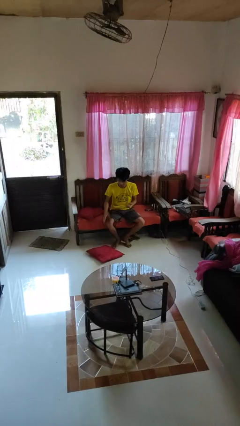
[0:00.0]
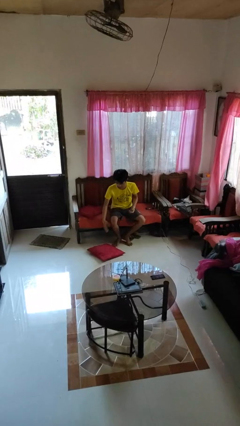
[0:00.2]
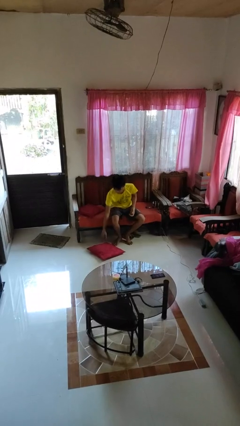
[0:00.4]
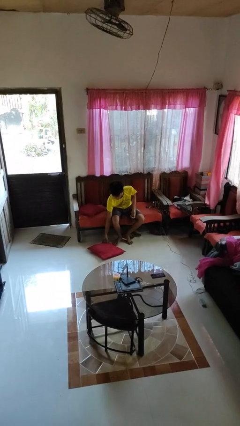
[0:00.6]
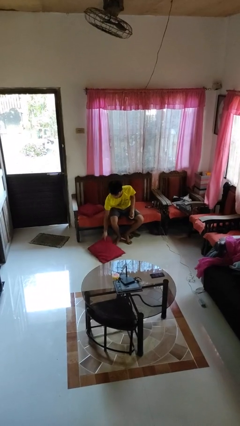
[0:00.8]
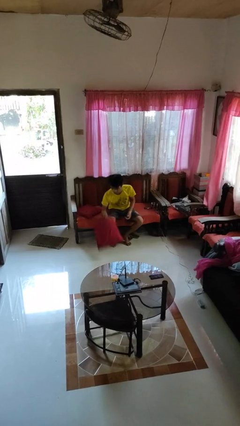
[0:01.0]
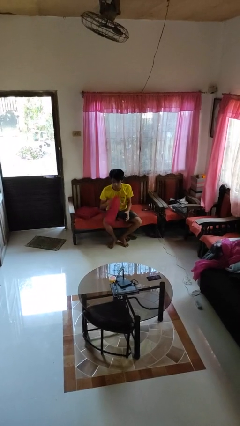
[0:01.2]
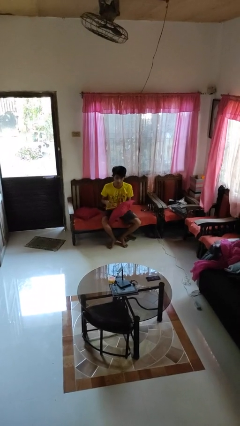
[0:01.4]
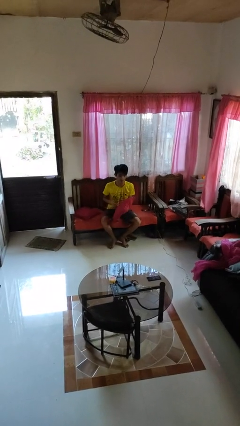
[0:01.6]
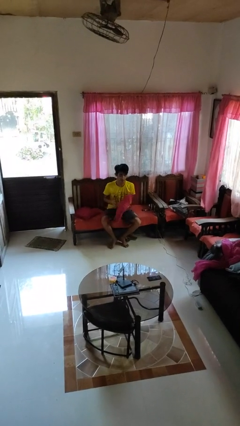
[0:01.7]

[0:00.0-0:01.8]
person picks up object from floor

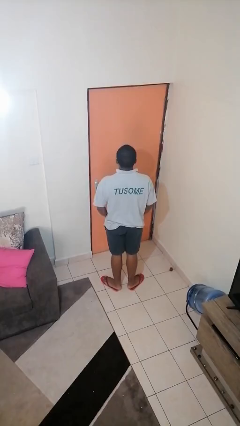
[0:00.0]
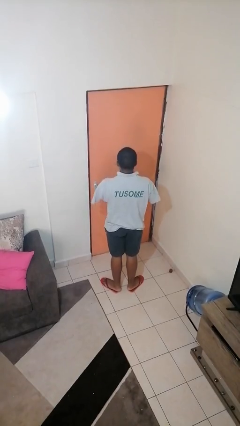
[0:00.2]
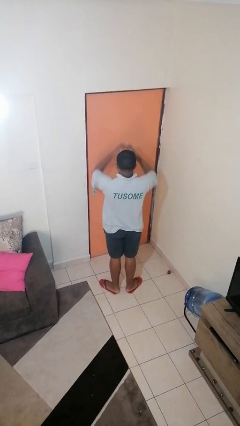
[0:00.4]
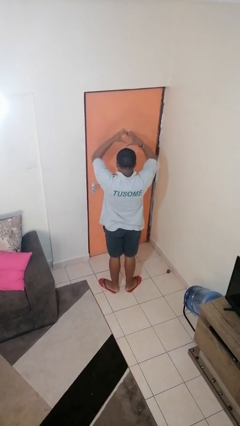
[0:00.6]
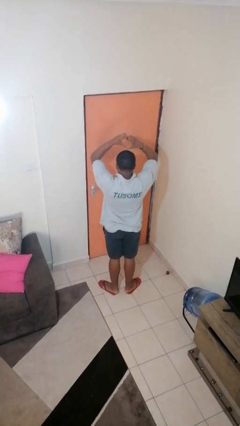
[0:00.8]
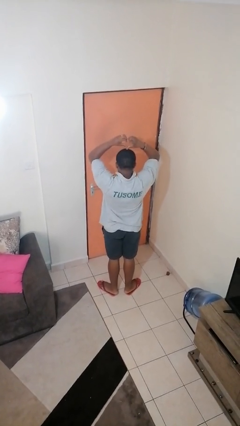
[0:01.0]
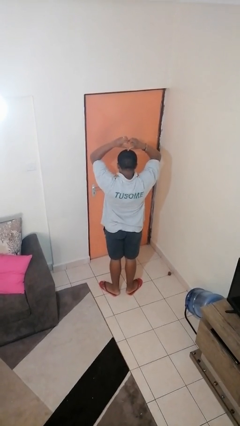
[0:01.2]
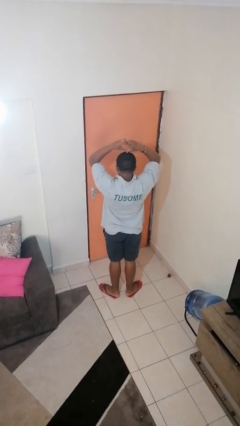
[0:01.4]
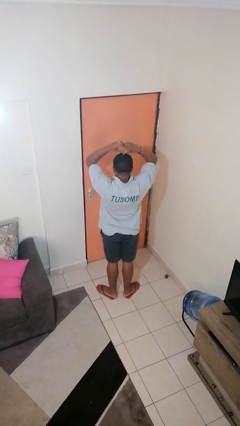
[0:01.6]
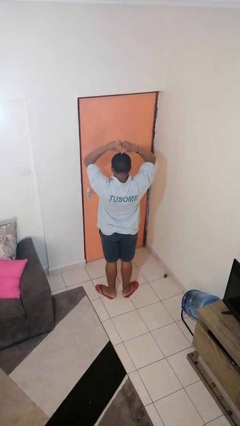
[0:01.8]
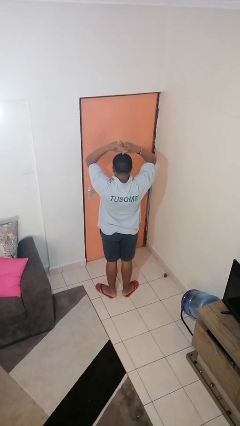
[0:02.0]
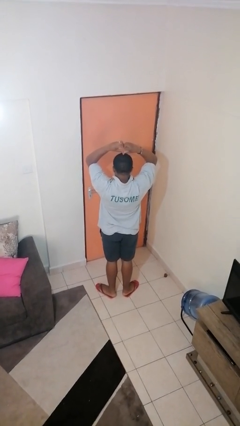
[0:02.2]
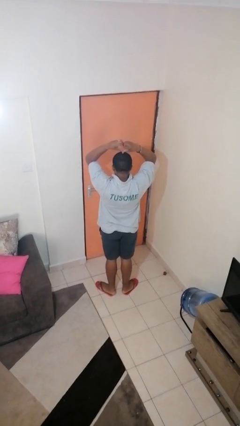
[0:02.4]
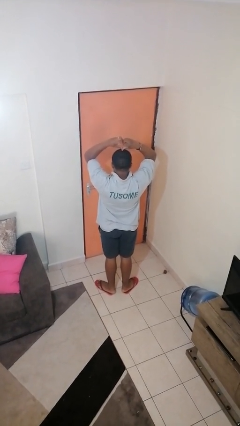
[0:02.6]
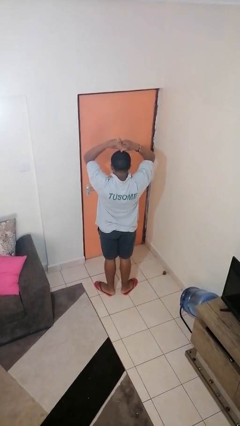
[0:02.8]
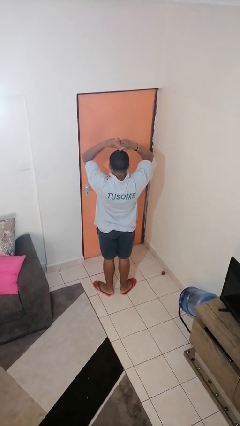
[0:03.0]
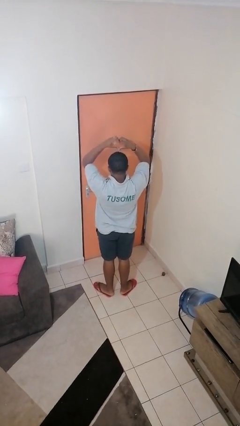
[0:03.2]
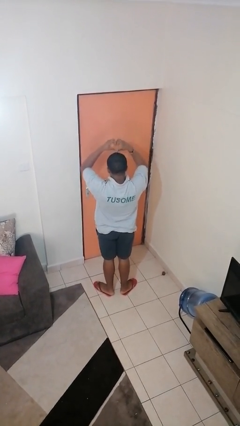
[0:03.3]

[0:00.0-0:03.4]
person gestures heart

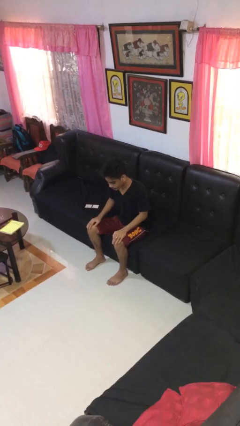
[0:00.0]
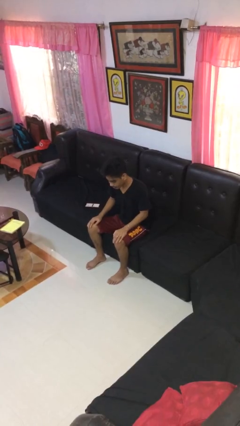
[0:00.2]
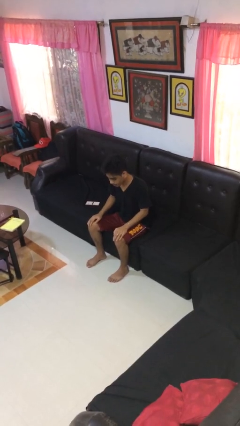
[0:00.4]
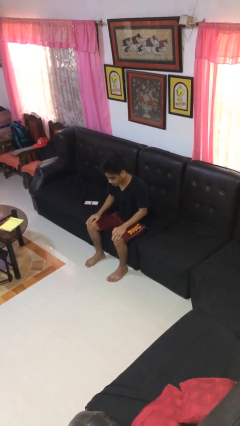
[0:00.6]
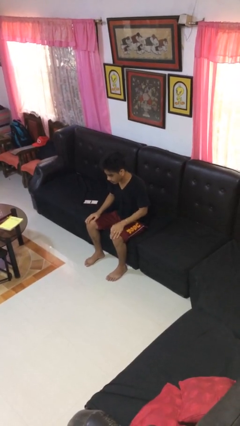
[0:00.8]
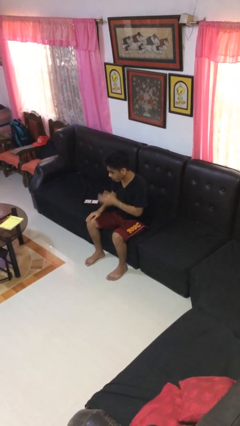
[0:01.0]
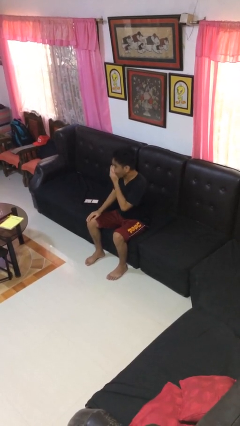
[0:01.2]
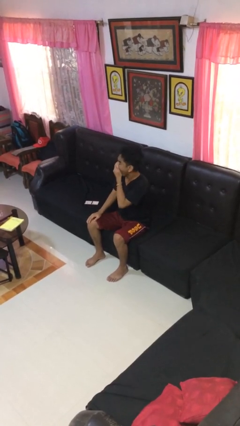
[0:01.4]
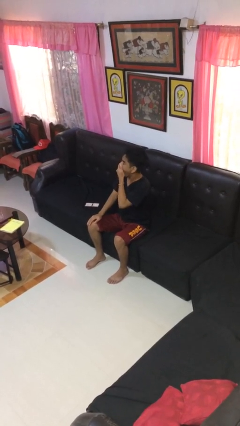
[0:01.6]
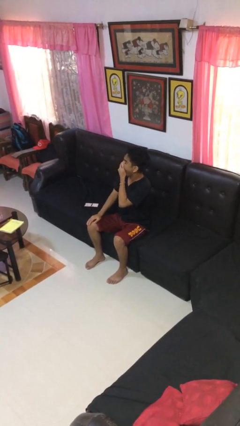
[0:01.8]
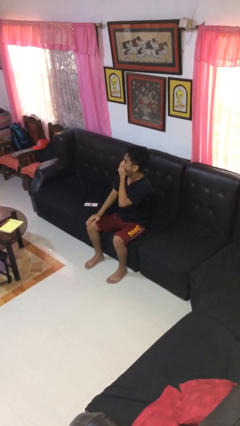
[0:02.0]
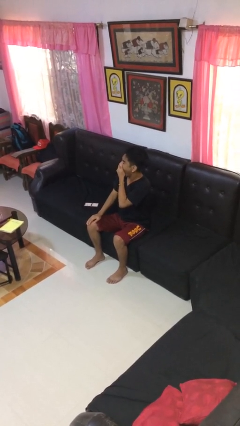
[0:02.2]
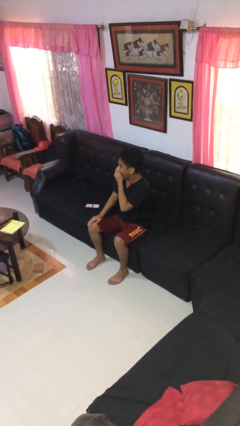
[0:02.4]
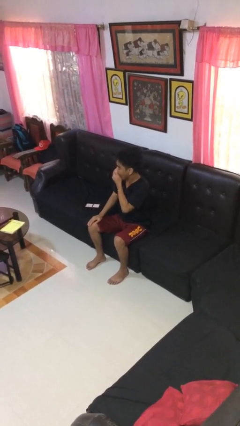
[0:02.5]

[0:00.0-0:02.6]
person yawns

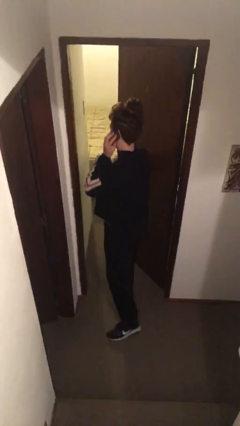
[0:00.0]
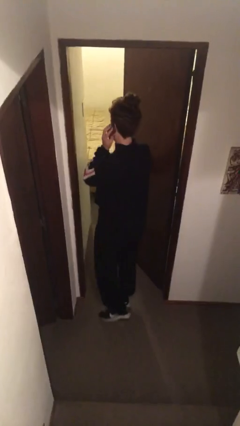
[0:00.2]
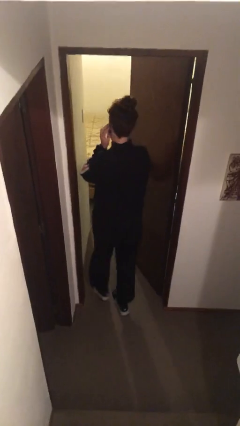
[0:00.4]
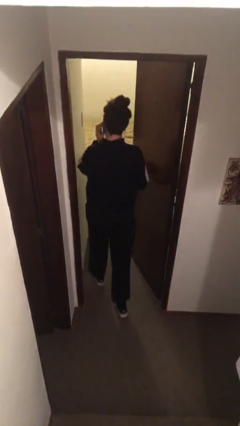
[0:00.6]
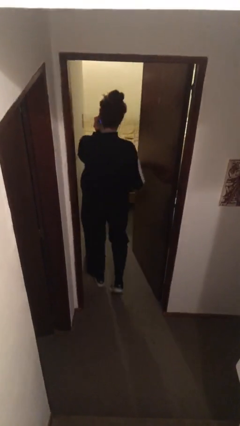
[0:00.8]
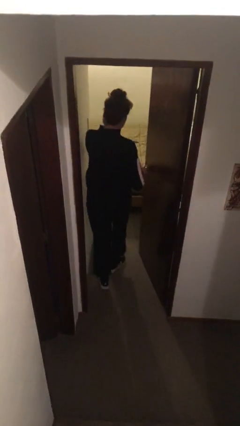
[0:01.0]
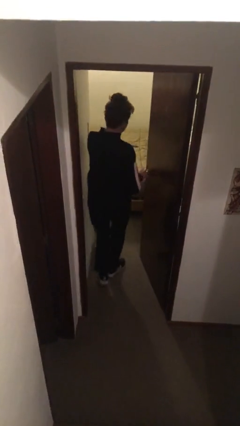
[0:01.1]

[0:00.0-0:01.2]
person exits scene through structure

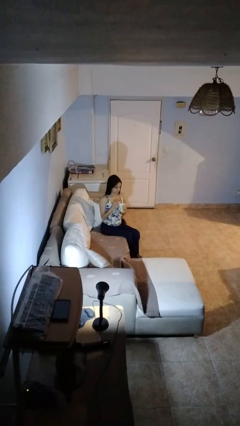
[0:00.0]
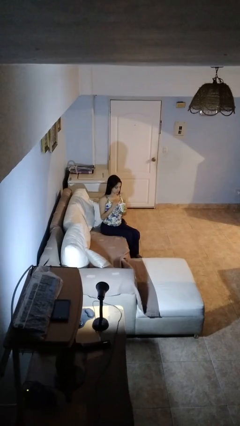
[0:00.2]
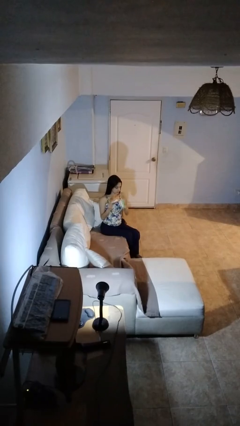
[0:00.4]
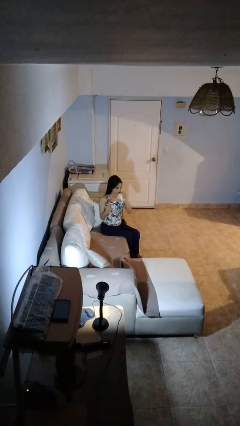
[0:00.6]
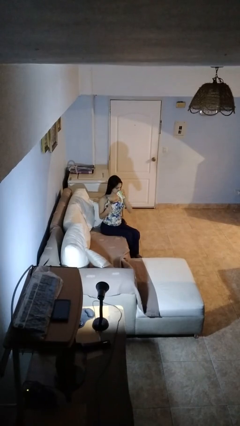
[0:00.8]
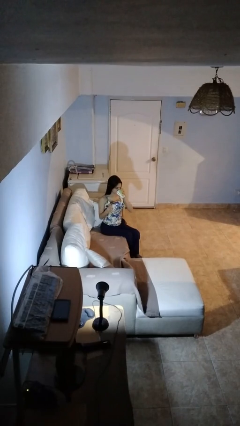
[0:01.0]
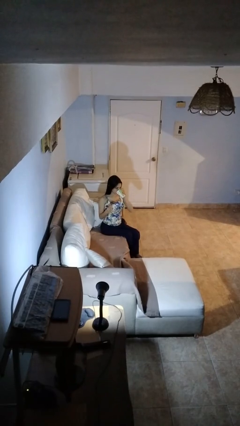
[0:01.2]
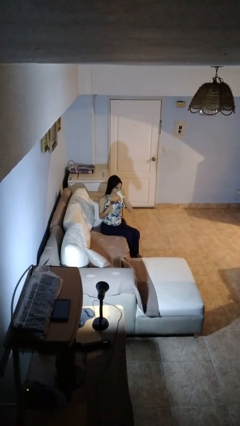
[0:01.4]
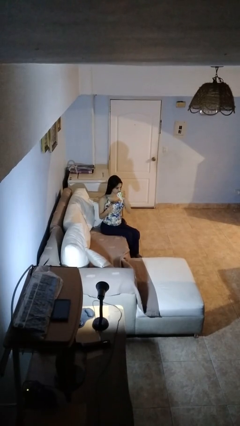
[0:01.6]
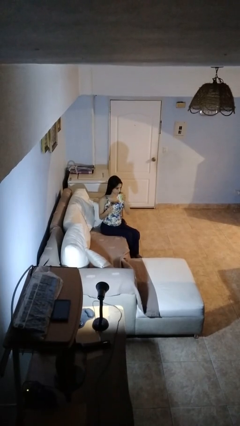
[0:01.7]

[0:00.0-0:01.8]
person drinks from mug

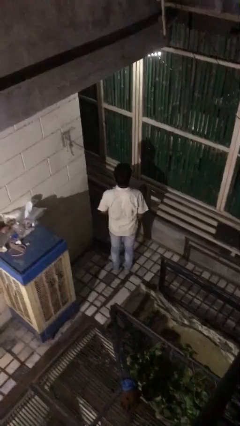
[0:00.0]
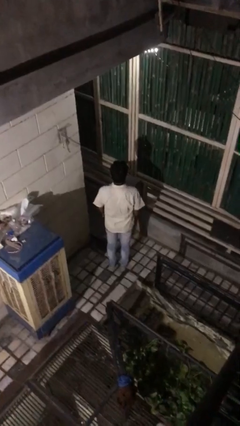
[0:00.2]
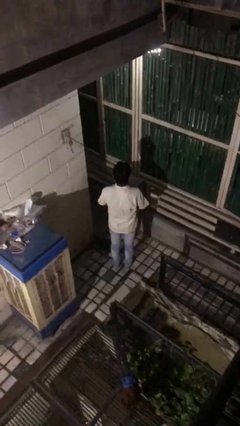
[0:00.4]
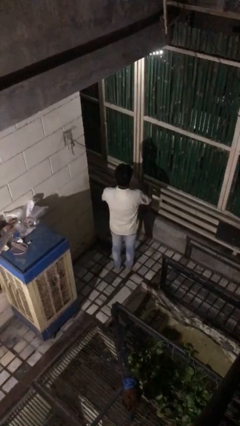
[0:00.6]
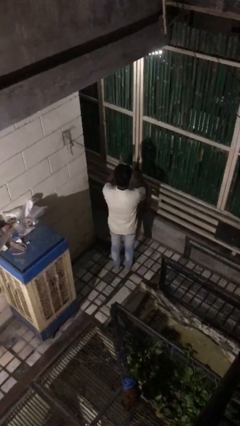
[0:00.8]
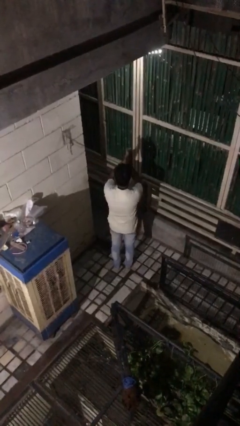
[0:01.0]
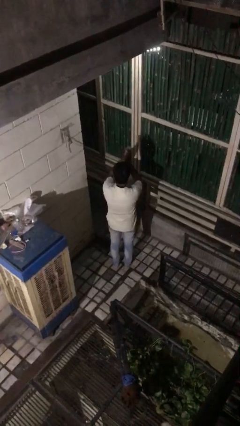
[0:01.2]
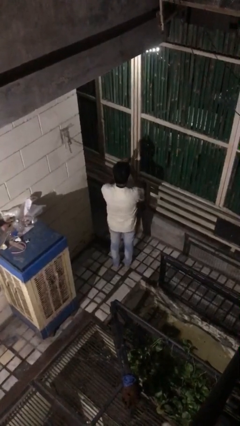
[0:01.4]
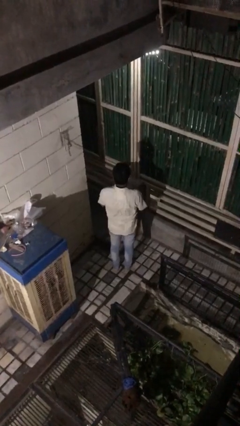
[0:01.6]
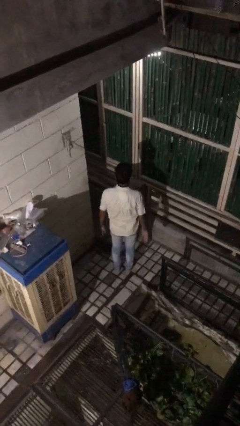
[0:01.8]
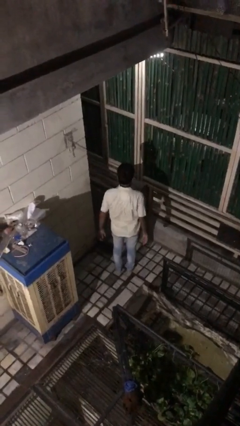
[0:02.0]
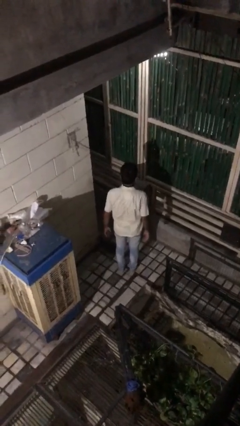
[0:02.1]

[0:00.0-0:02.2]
person claps hands

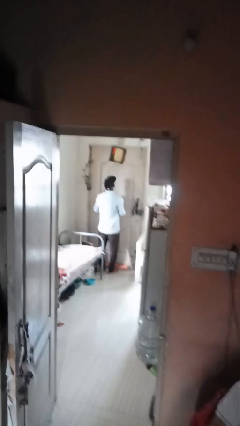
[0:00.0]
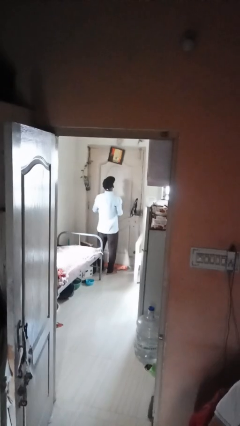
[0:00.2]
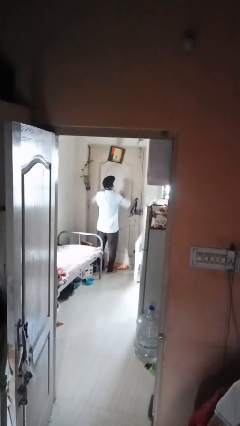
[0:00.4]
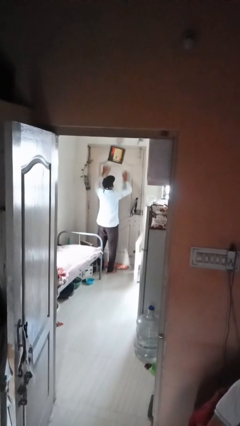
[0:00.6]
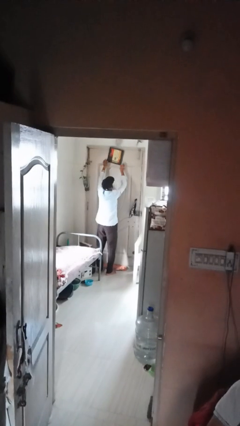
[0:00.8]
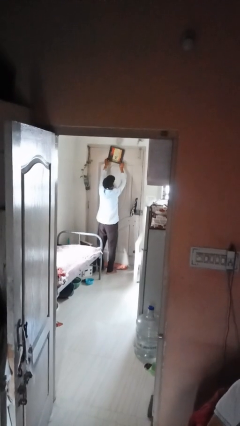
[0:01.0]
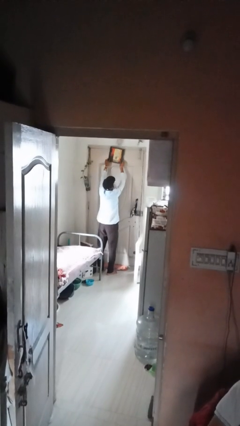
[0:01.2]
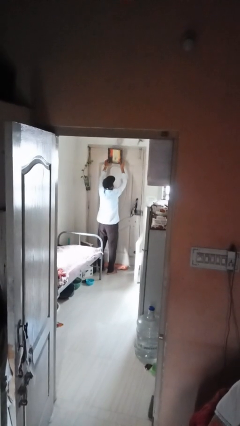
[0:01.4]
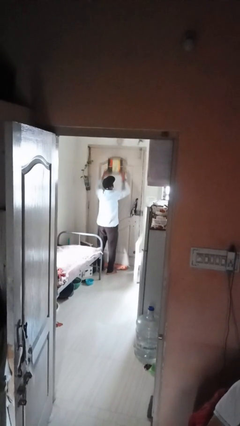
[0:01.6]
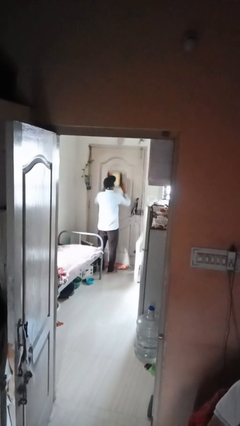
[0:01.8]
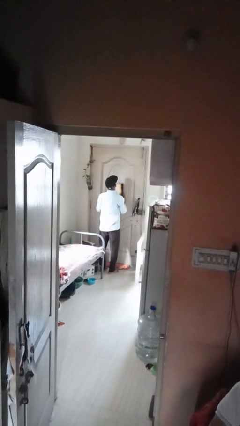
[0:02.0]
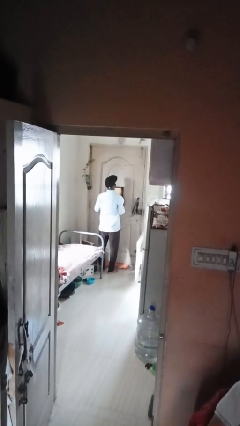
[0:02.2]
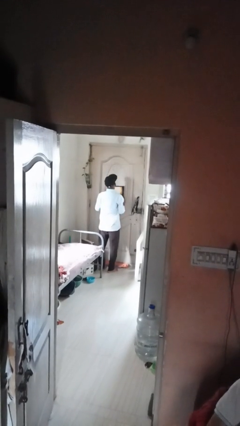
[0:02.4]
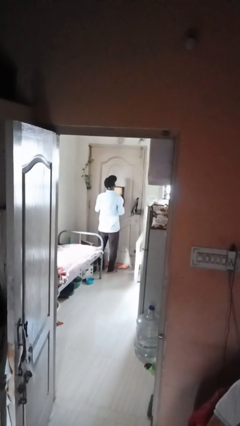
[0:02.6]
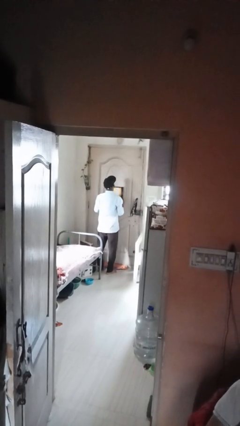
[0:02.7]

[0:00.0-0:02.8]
person takes down picture frame

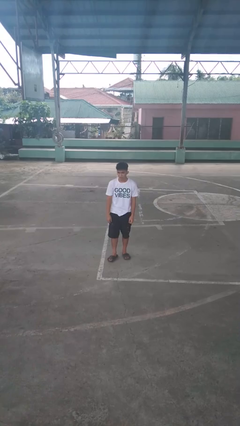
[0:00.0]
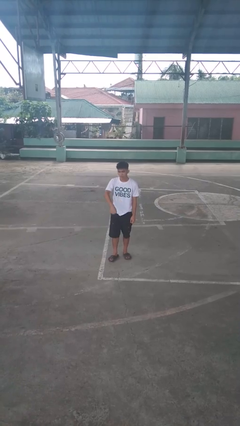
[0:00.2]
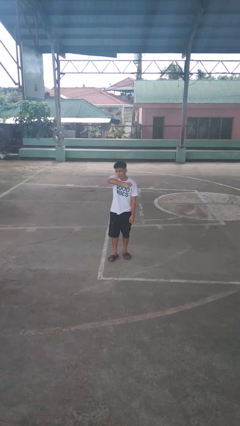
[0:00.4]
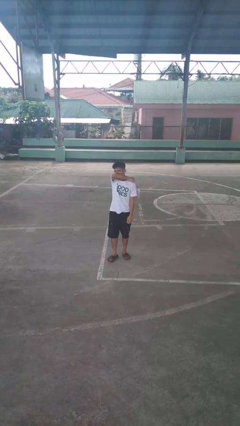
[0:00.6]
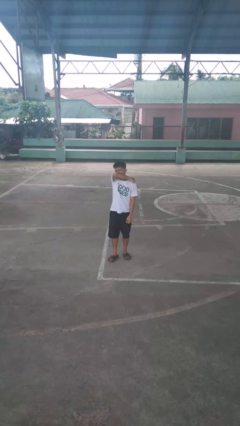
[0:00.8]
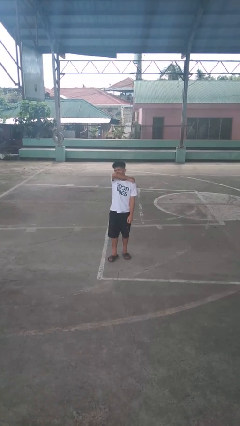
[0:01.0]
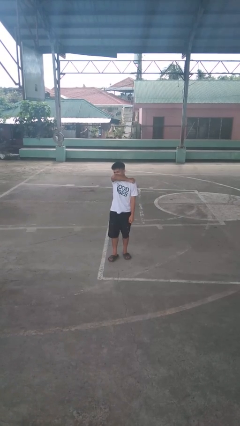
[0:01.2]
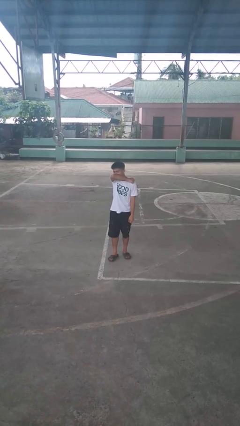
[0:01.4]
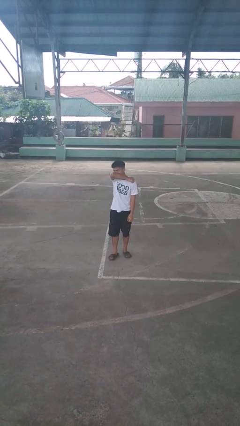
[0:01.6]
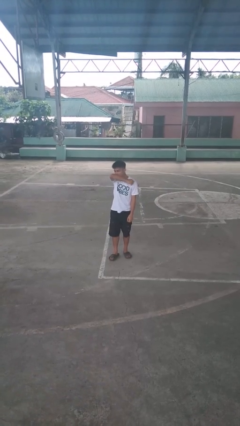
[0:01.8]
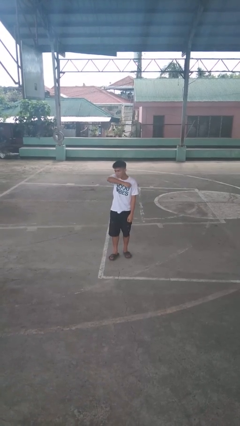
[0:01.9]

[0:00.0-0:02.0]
person sneezes into arm
